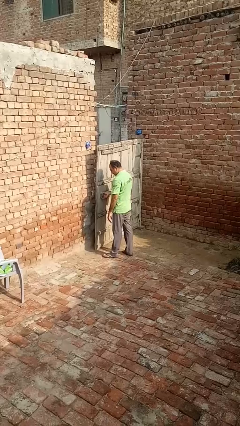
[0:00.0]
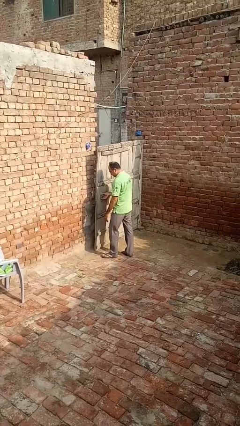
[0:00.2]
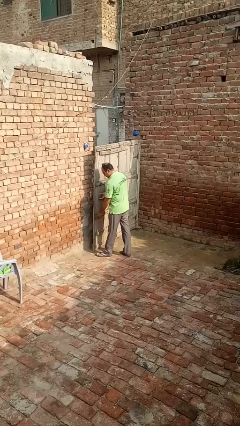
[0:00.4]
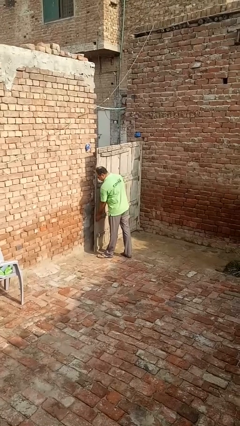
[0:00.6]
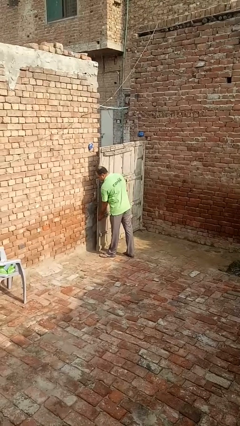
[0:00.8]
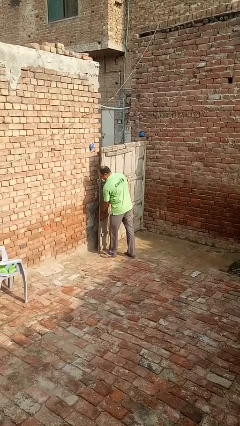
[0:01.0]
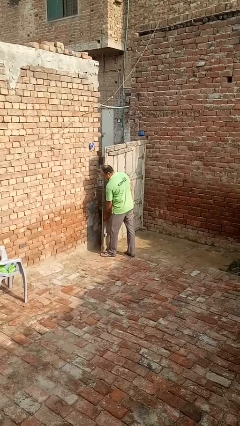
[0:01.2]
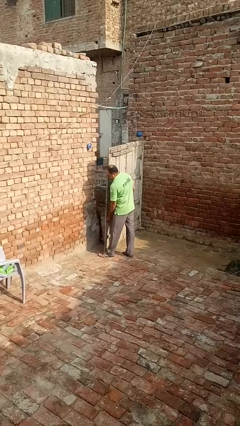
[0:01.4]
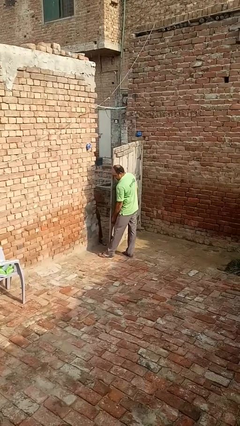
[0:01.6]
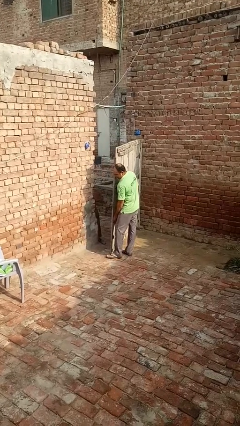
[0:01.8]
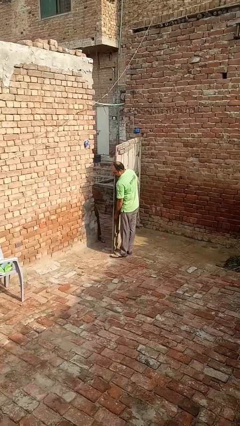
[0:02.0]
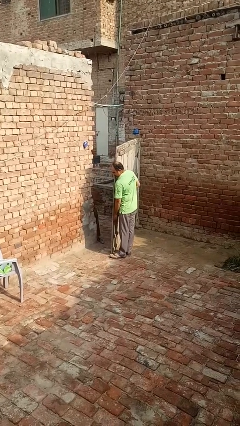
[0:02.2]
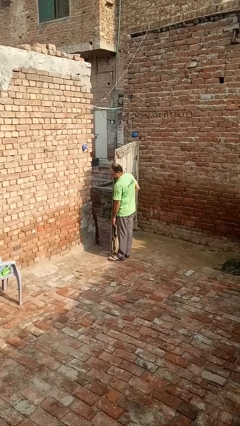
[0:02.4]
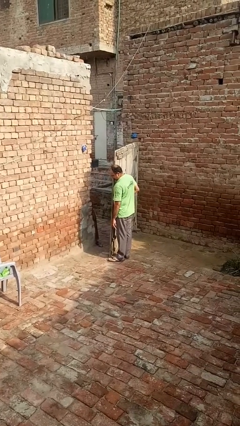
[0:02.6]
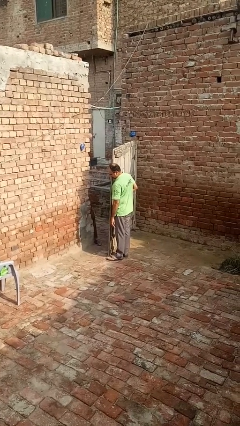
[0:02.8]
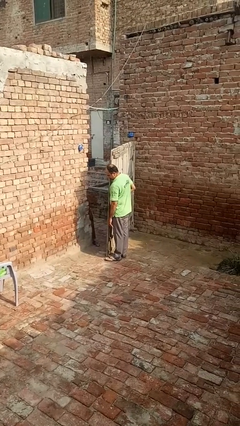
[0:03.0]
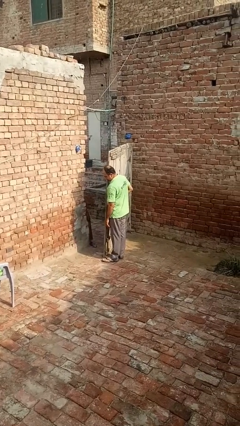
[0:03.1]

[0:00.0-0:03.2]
person opens gate

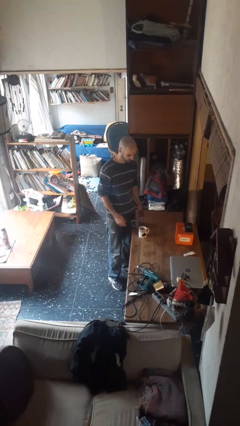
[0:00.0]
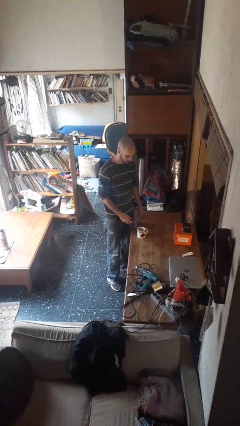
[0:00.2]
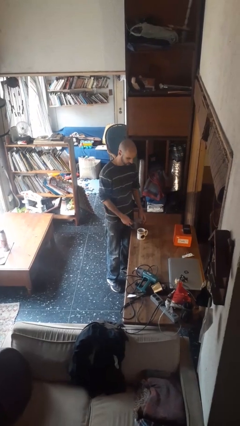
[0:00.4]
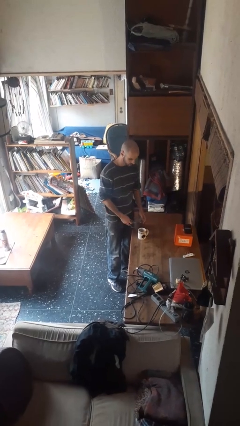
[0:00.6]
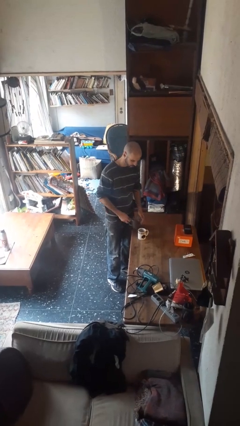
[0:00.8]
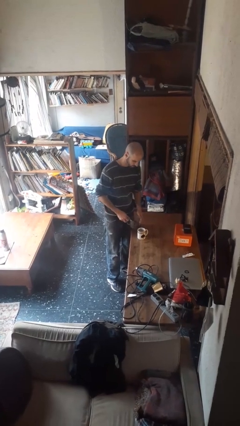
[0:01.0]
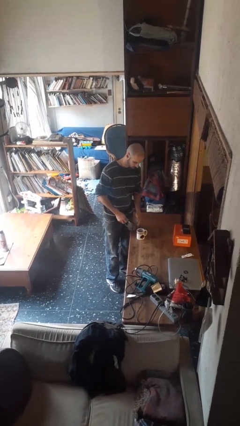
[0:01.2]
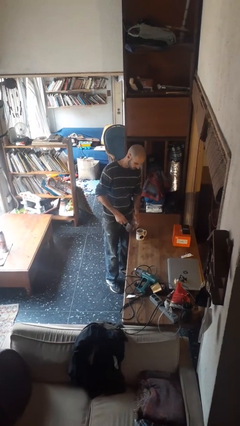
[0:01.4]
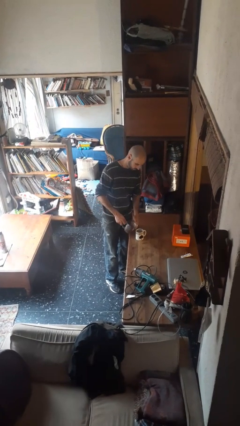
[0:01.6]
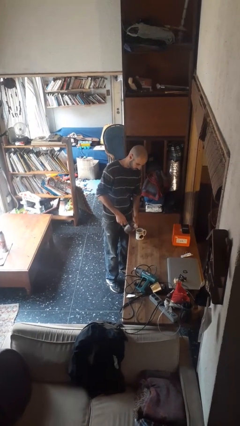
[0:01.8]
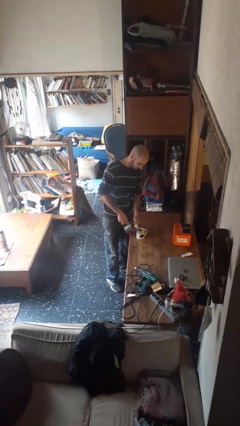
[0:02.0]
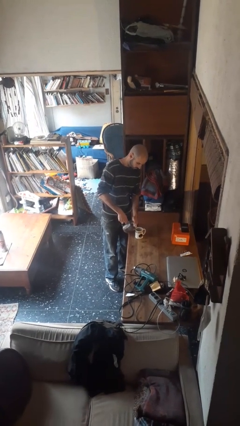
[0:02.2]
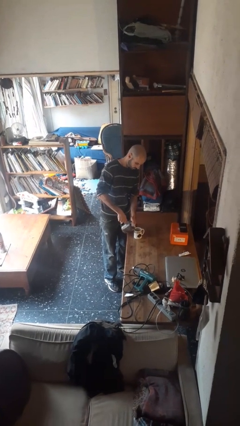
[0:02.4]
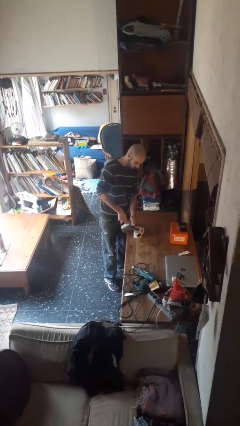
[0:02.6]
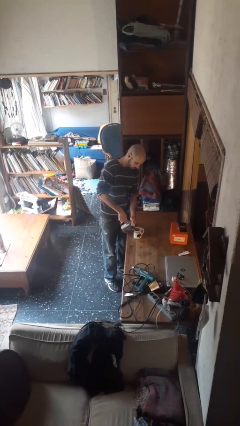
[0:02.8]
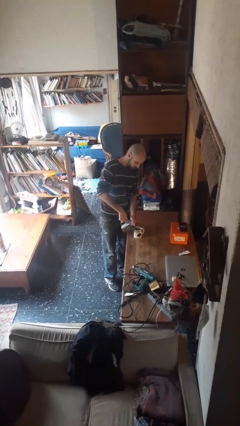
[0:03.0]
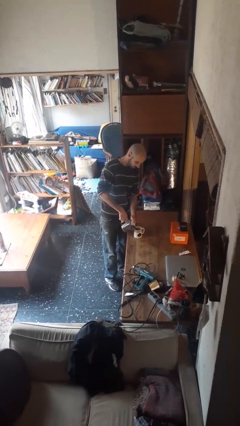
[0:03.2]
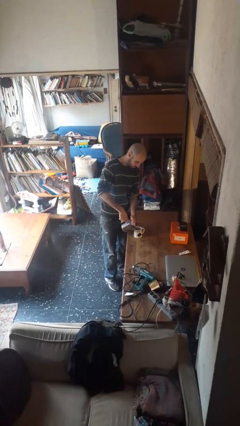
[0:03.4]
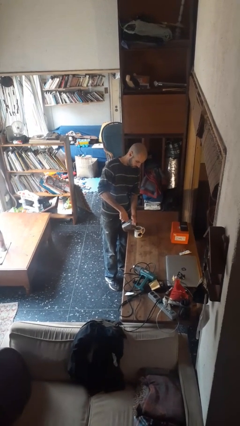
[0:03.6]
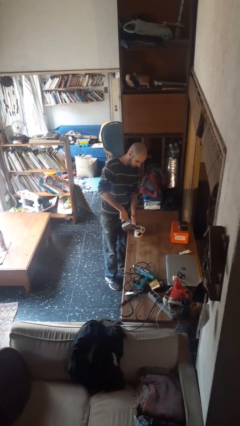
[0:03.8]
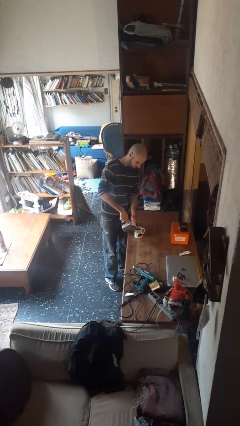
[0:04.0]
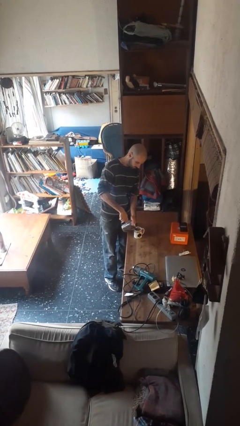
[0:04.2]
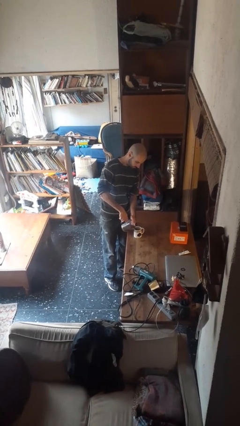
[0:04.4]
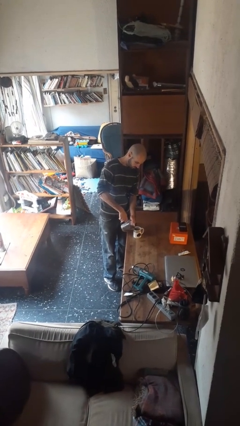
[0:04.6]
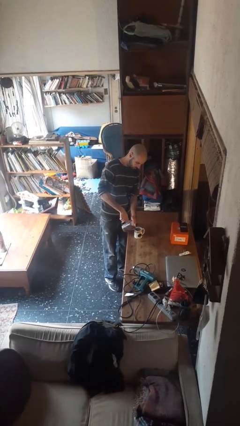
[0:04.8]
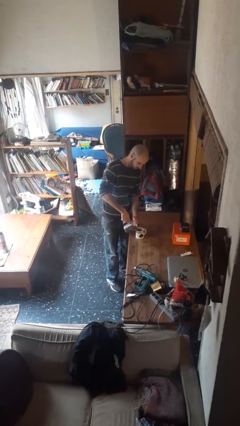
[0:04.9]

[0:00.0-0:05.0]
person pours coffee into mug

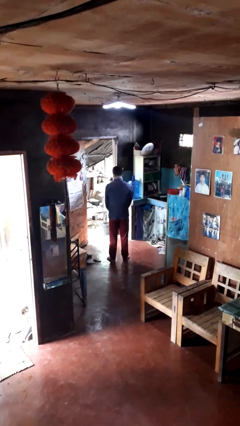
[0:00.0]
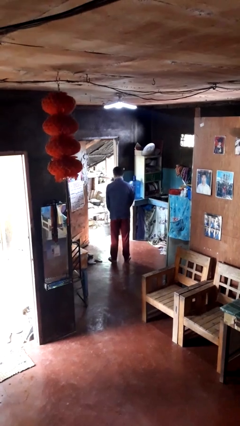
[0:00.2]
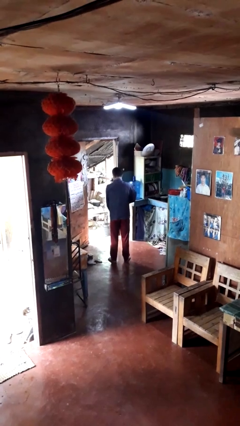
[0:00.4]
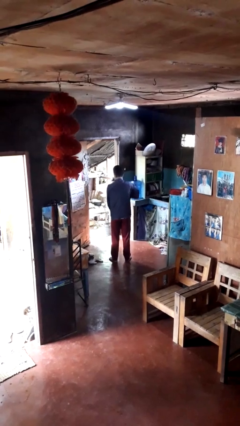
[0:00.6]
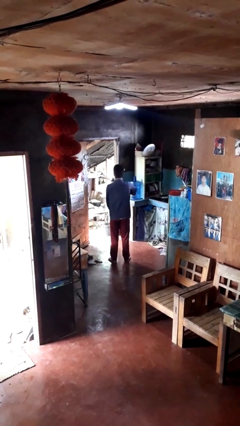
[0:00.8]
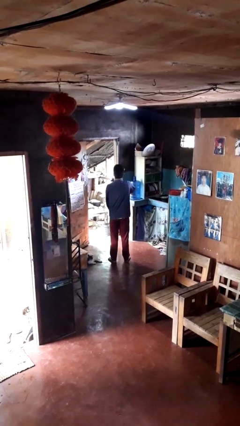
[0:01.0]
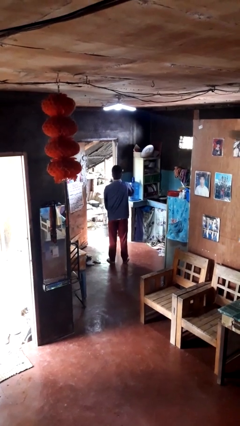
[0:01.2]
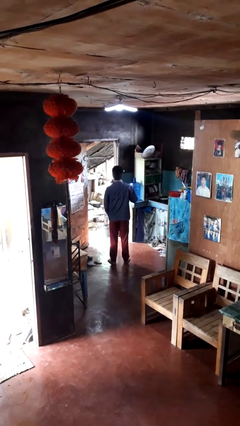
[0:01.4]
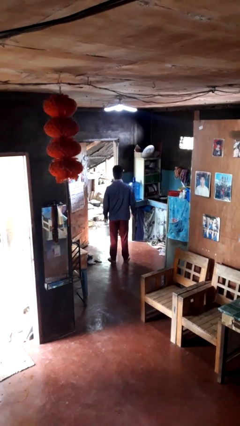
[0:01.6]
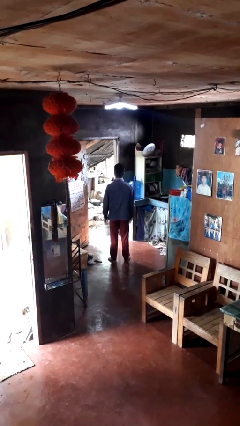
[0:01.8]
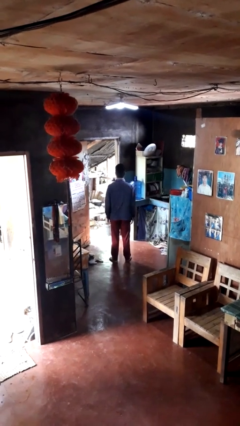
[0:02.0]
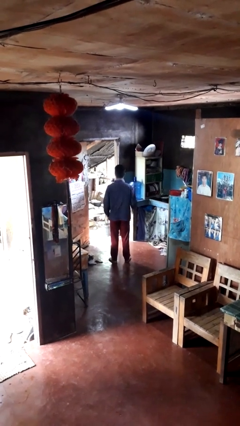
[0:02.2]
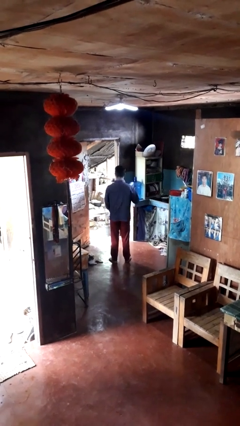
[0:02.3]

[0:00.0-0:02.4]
person zips up jacket

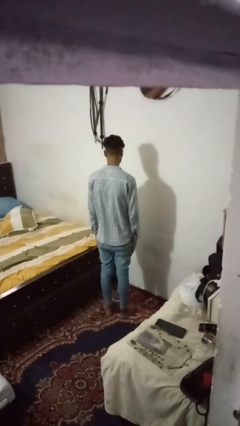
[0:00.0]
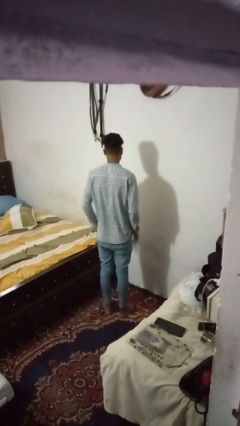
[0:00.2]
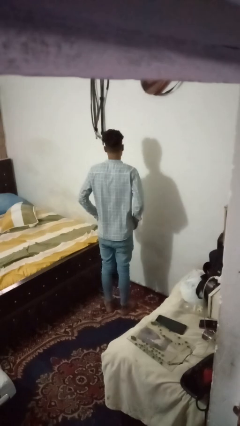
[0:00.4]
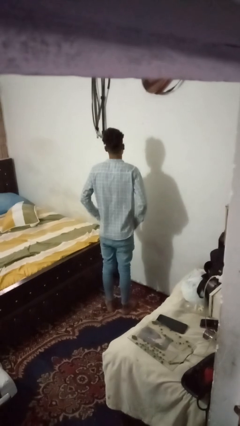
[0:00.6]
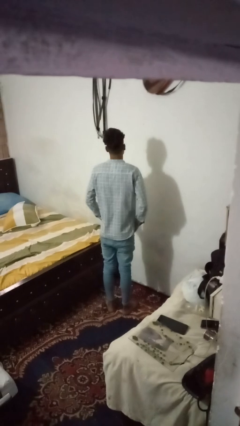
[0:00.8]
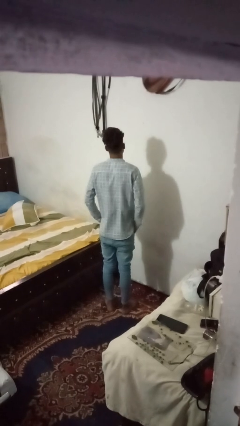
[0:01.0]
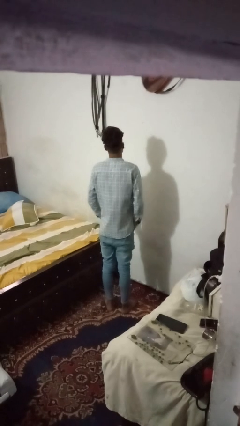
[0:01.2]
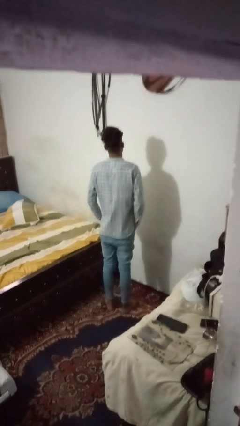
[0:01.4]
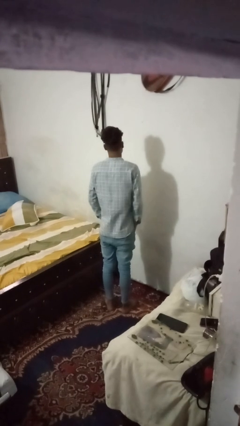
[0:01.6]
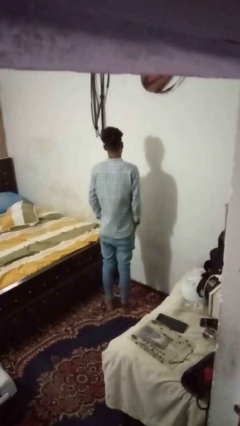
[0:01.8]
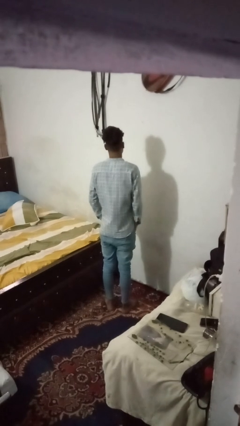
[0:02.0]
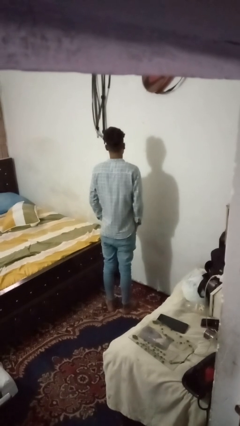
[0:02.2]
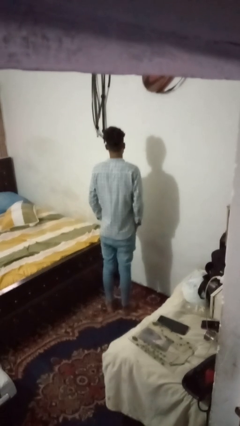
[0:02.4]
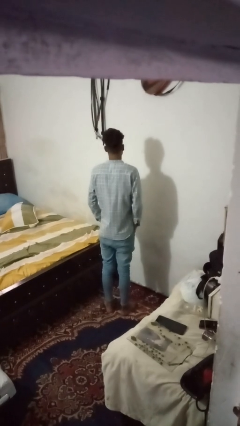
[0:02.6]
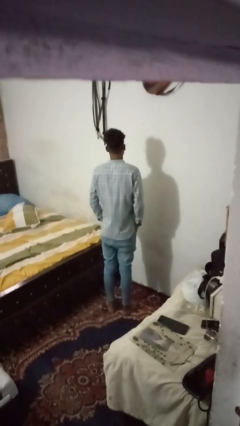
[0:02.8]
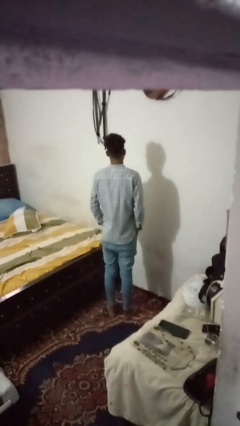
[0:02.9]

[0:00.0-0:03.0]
person puts hands in back pockets

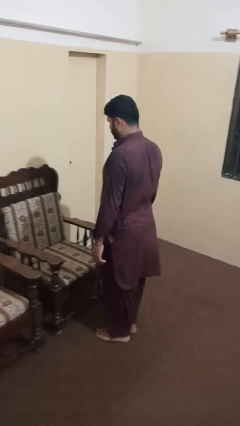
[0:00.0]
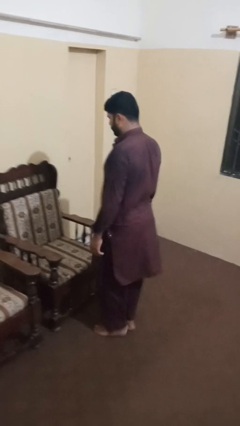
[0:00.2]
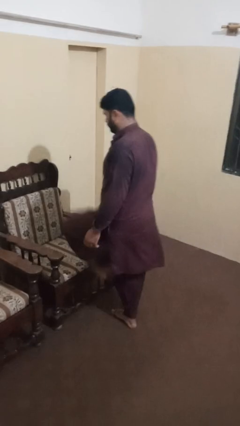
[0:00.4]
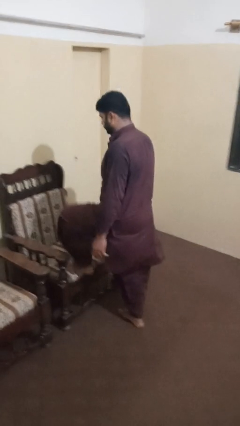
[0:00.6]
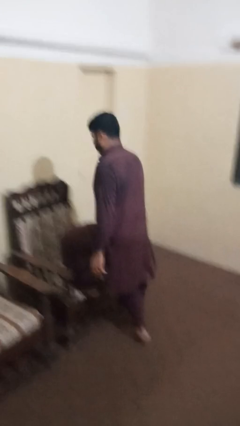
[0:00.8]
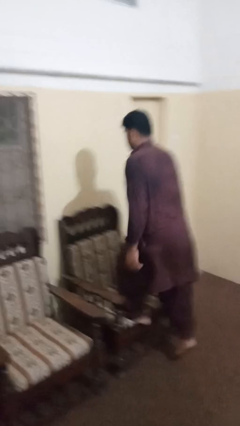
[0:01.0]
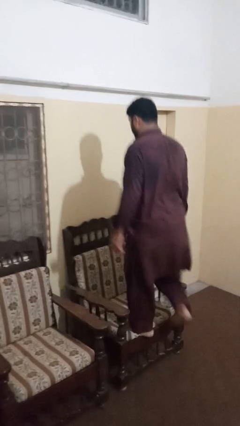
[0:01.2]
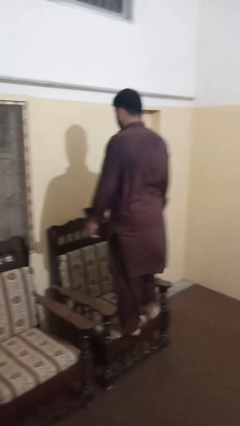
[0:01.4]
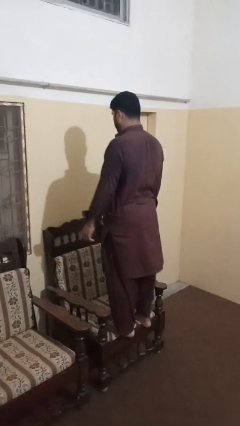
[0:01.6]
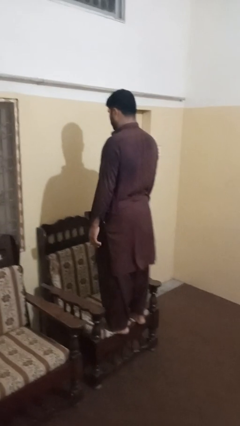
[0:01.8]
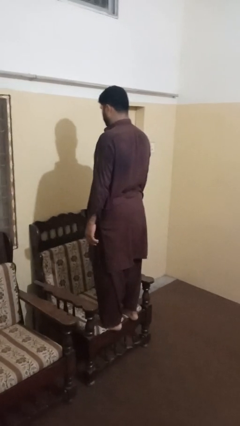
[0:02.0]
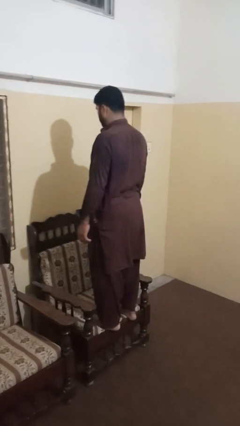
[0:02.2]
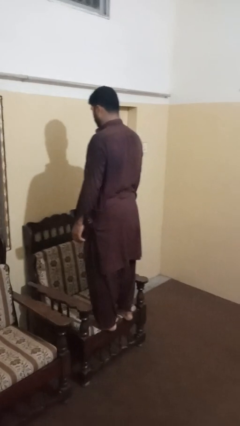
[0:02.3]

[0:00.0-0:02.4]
person climbs on chair

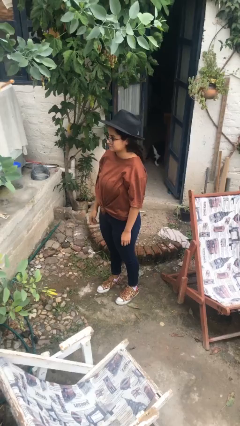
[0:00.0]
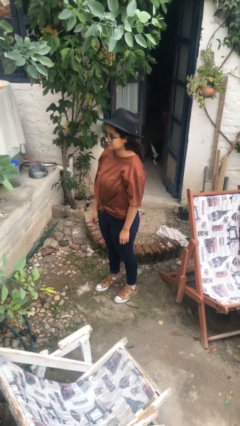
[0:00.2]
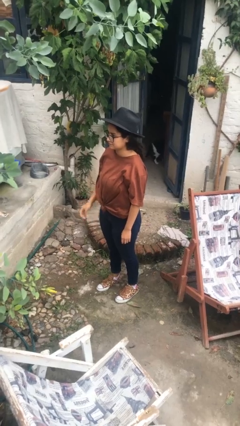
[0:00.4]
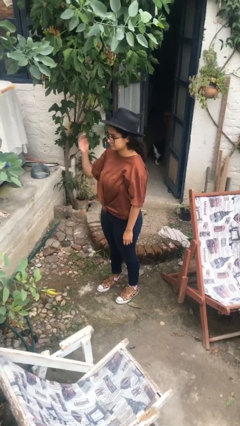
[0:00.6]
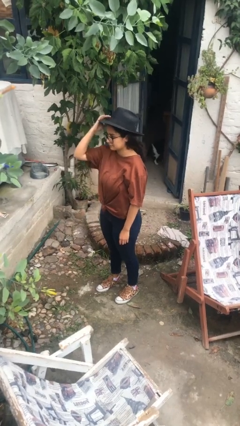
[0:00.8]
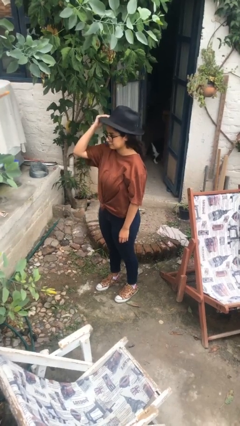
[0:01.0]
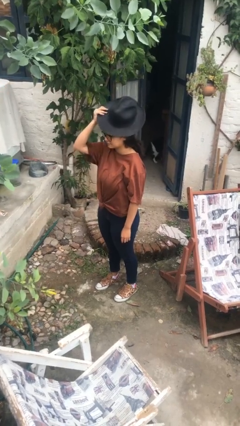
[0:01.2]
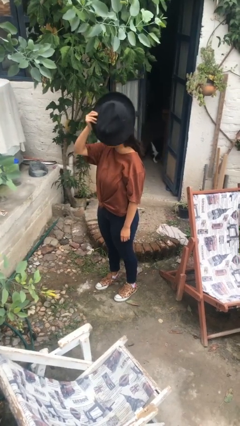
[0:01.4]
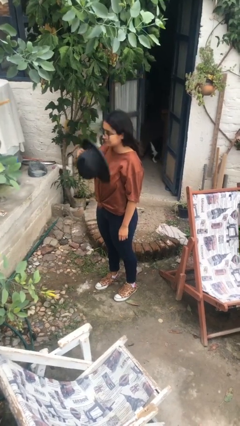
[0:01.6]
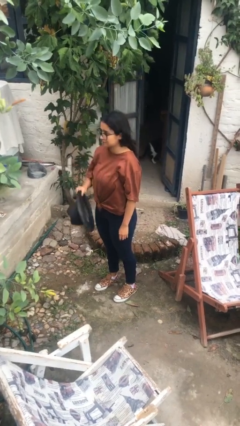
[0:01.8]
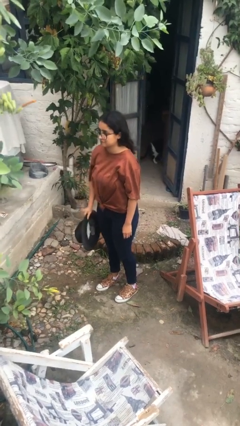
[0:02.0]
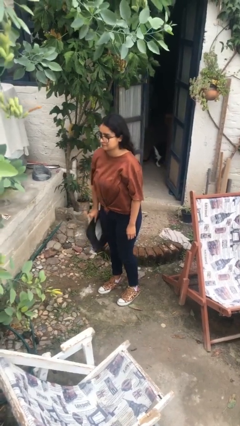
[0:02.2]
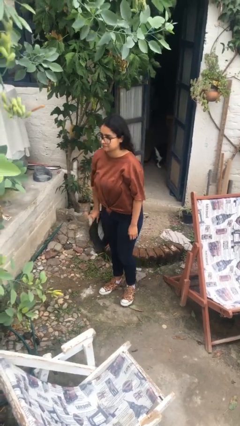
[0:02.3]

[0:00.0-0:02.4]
person takes off hat
